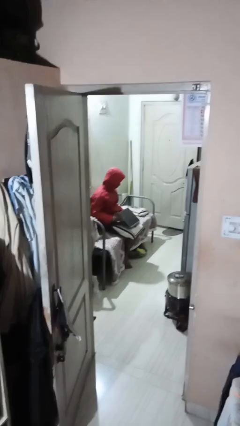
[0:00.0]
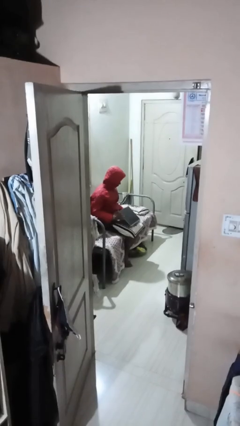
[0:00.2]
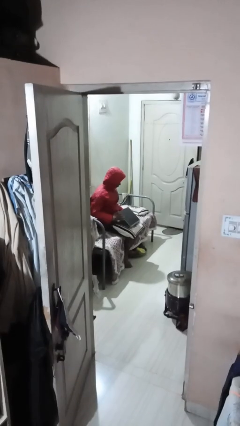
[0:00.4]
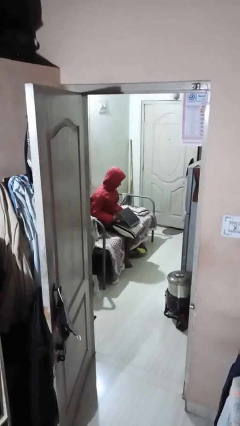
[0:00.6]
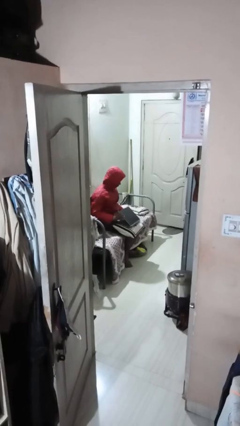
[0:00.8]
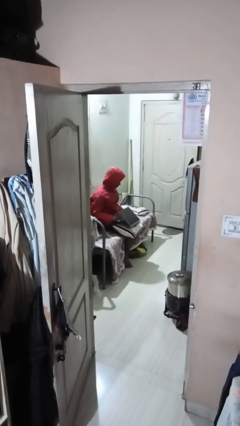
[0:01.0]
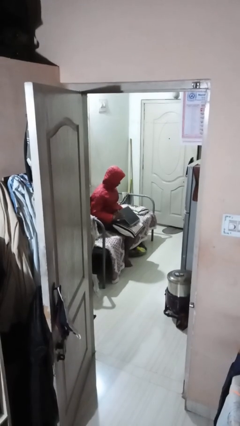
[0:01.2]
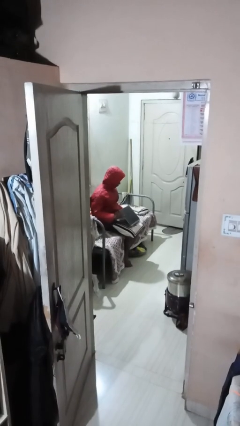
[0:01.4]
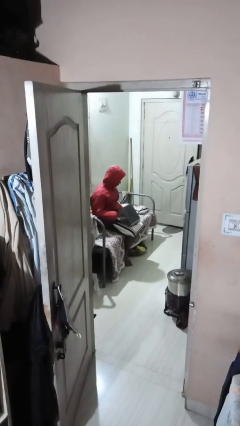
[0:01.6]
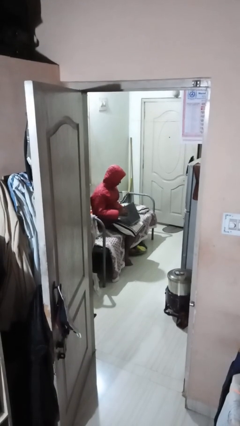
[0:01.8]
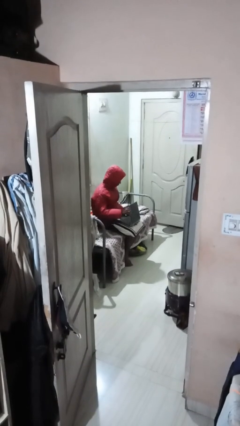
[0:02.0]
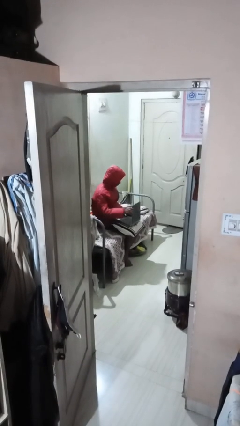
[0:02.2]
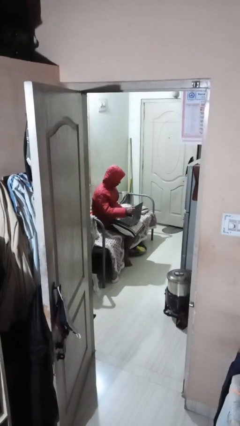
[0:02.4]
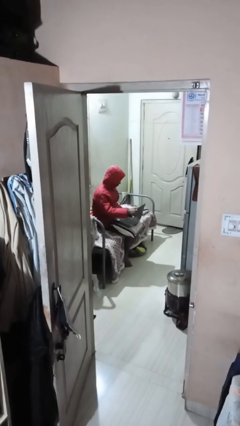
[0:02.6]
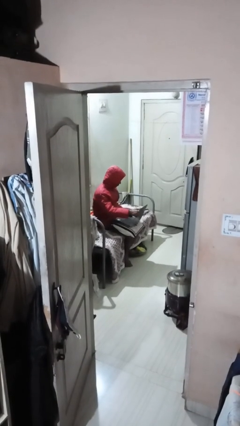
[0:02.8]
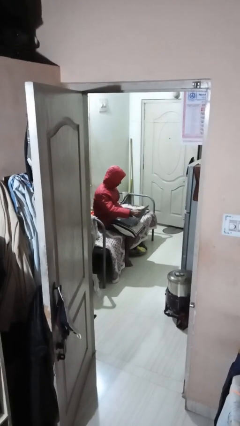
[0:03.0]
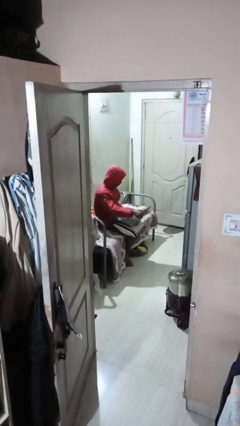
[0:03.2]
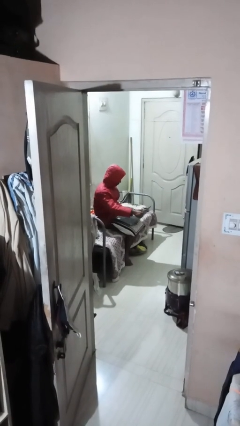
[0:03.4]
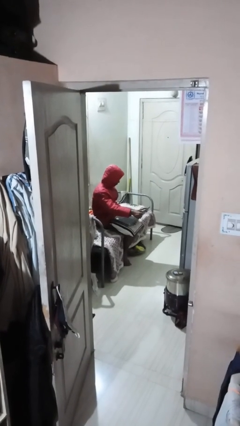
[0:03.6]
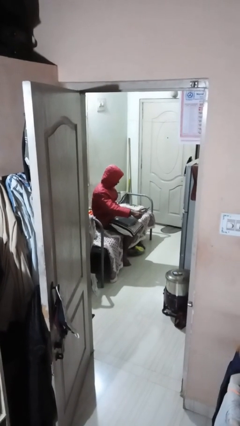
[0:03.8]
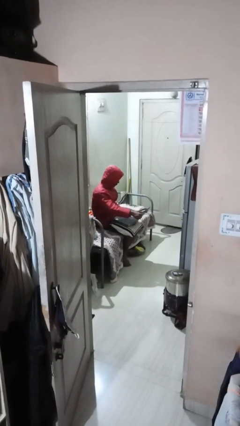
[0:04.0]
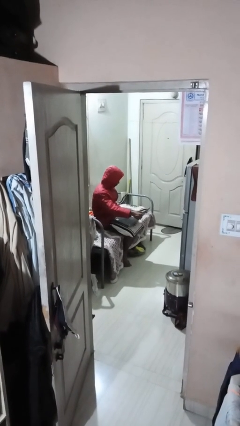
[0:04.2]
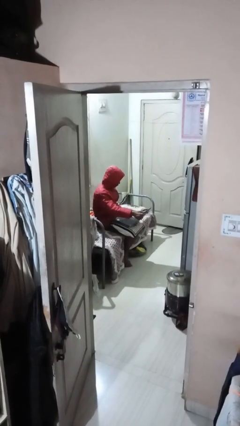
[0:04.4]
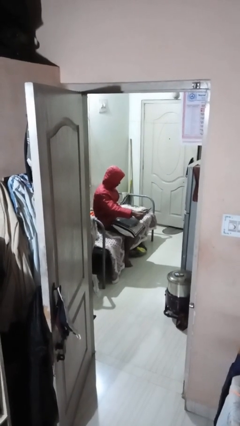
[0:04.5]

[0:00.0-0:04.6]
person interacts with laptop

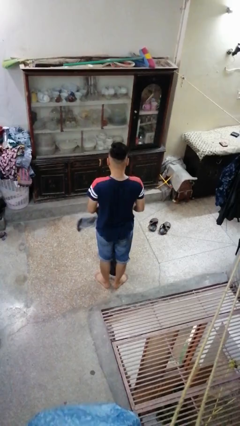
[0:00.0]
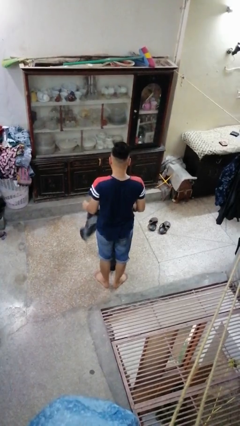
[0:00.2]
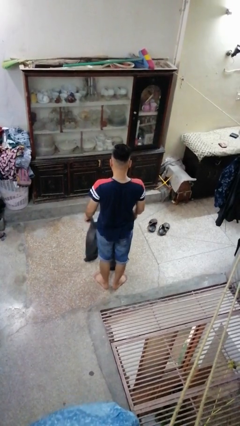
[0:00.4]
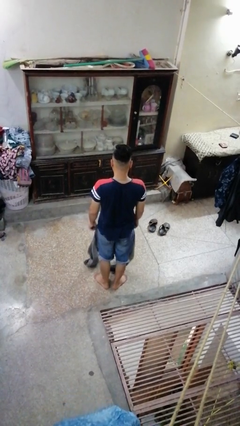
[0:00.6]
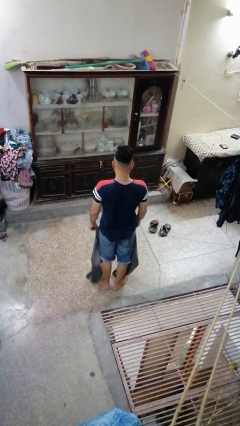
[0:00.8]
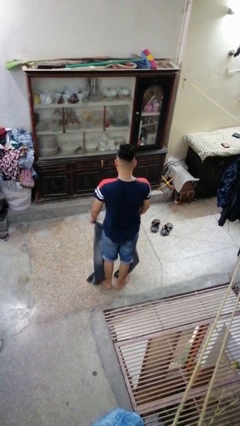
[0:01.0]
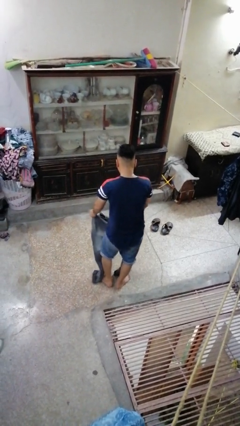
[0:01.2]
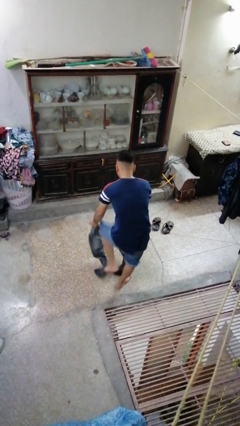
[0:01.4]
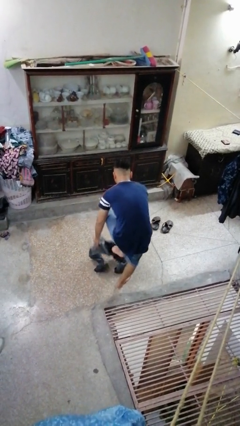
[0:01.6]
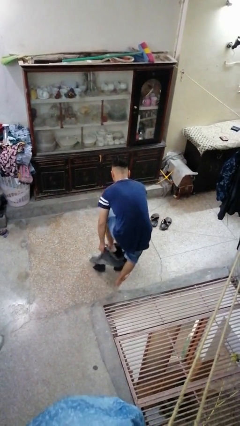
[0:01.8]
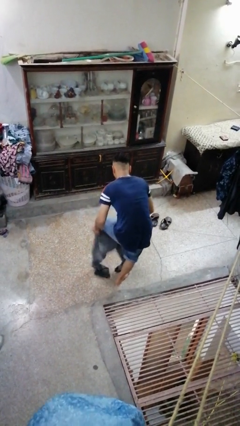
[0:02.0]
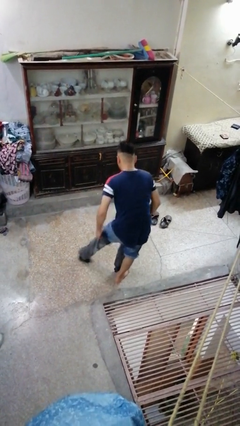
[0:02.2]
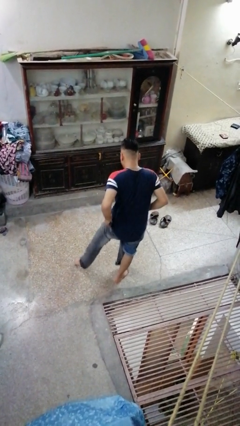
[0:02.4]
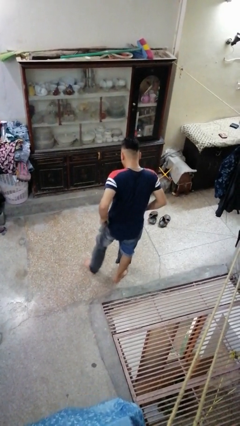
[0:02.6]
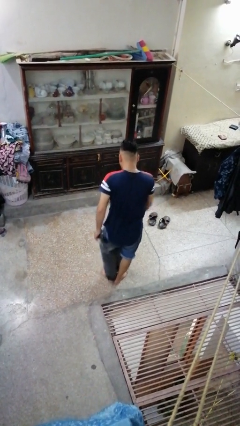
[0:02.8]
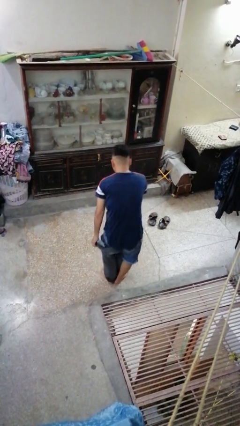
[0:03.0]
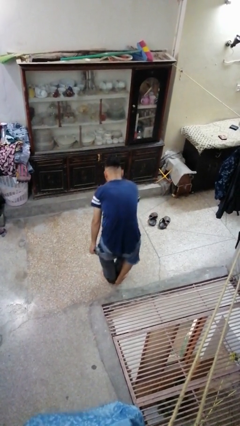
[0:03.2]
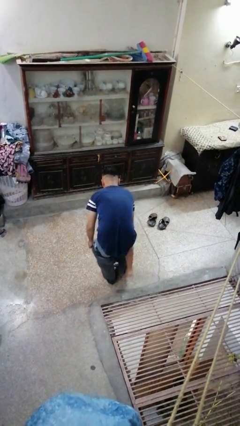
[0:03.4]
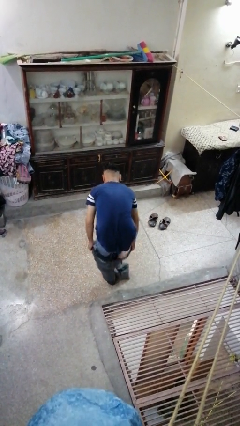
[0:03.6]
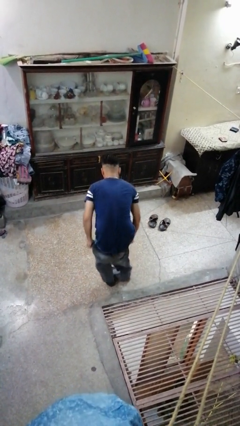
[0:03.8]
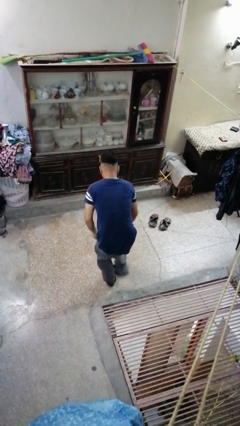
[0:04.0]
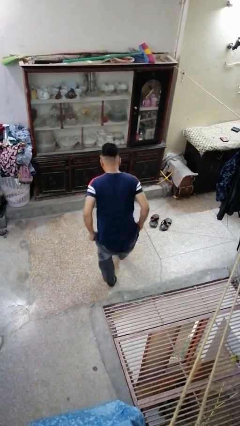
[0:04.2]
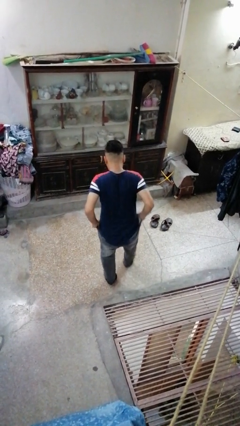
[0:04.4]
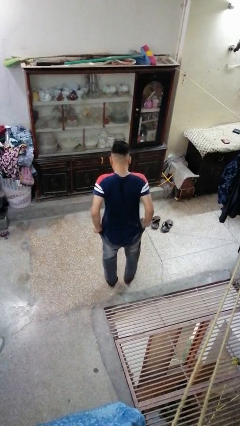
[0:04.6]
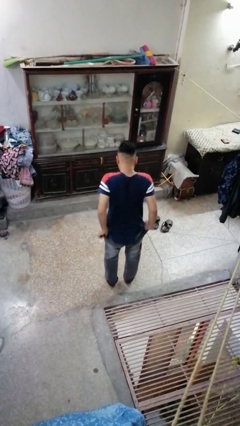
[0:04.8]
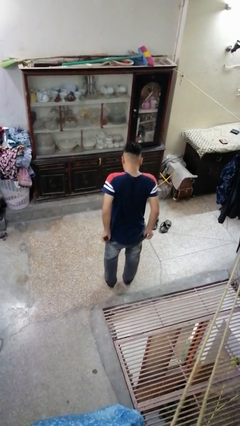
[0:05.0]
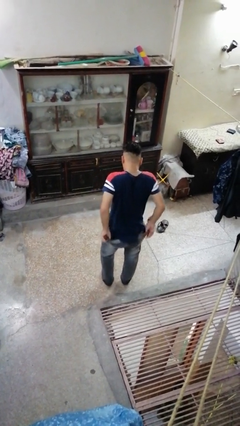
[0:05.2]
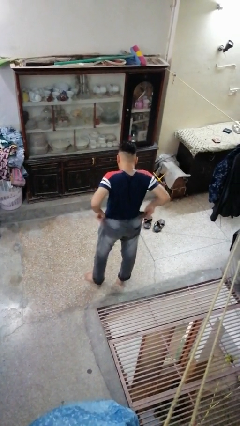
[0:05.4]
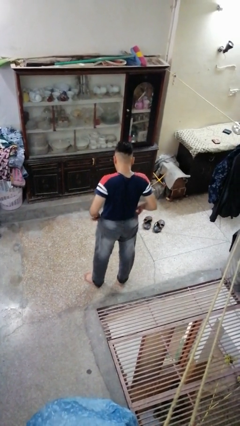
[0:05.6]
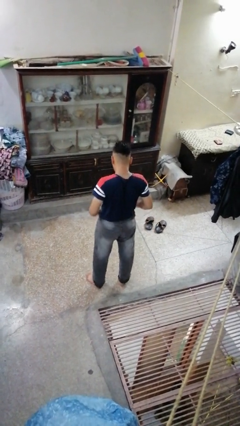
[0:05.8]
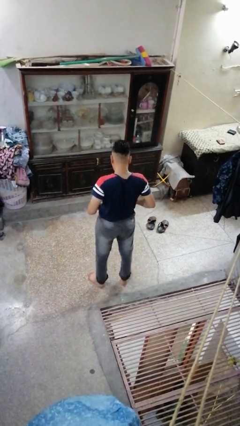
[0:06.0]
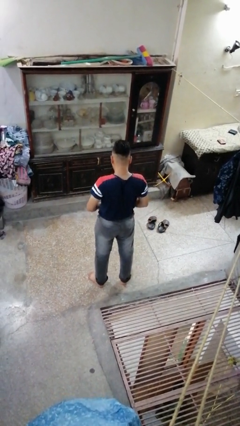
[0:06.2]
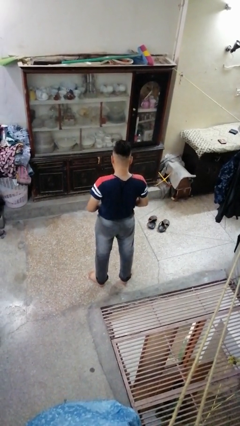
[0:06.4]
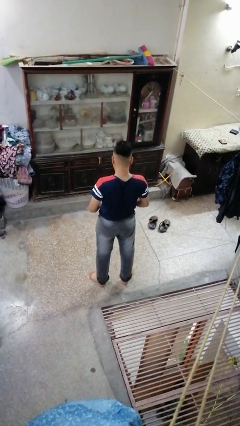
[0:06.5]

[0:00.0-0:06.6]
person puts on pants

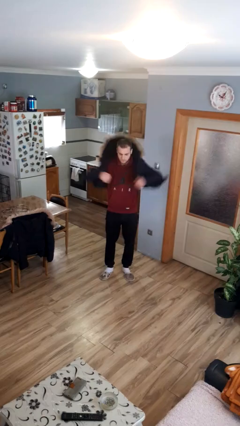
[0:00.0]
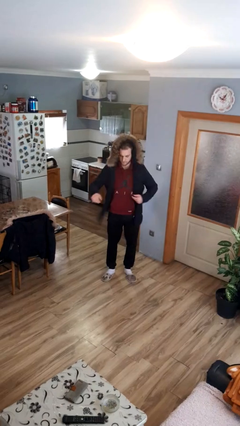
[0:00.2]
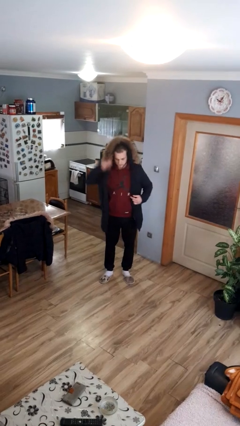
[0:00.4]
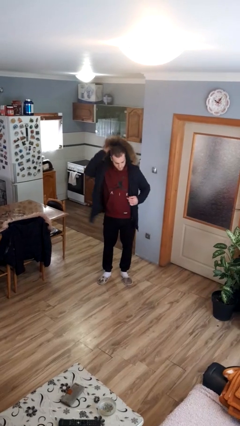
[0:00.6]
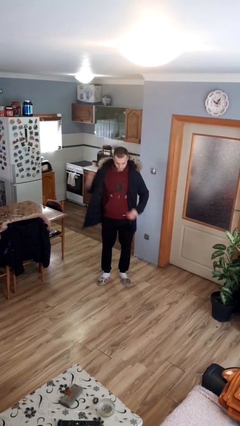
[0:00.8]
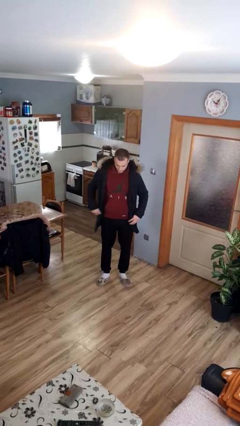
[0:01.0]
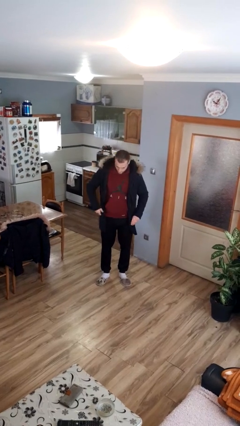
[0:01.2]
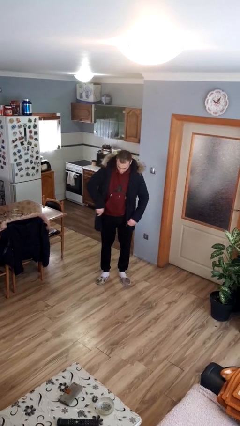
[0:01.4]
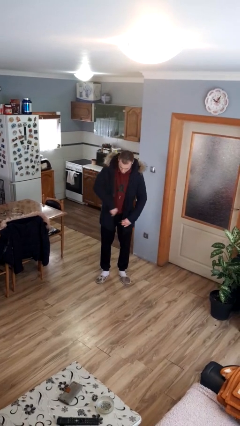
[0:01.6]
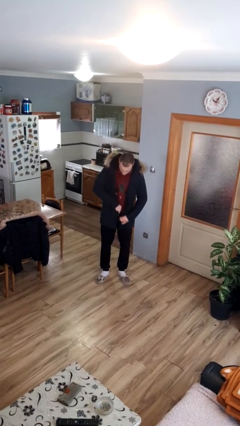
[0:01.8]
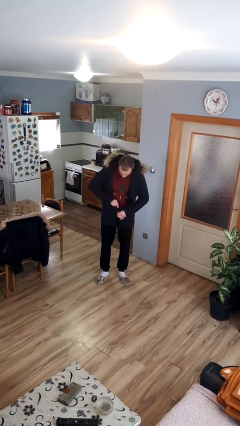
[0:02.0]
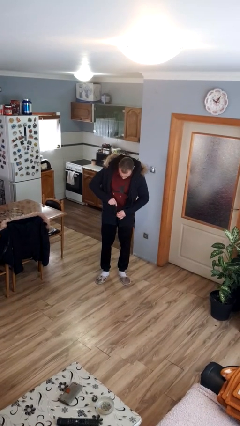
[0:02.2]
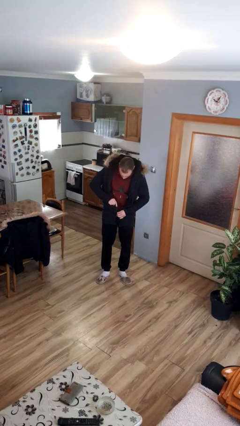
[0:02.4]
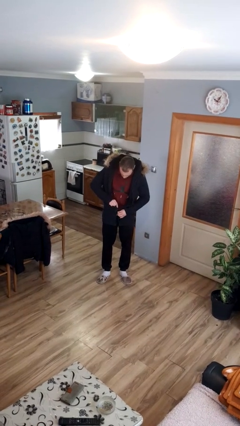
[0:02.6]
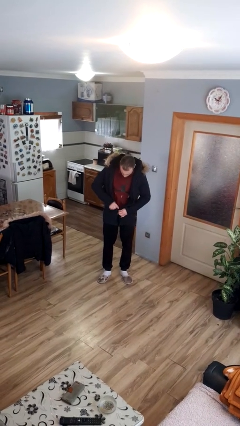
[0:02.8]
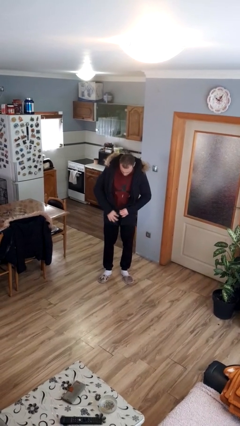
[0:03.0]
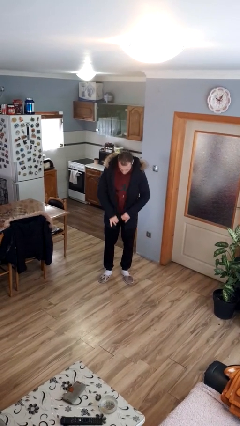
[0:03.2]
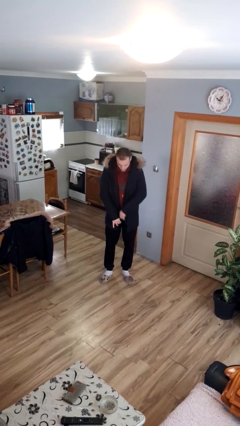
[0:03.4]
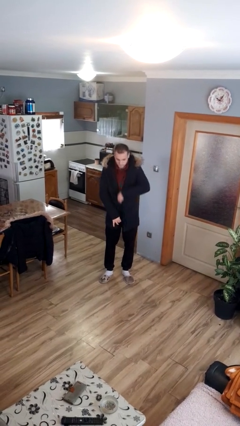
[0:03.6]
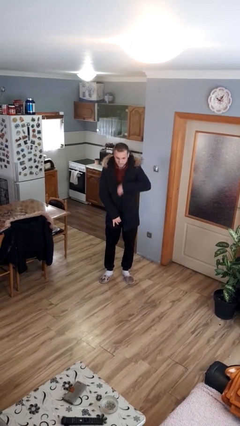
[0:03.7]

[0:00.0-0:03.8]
person puts on jacket

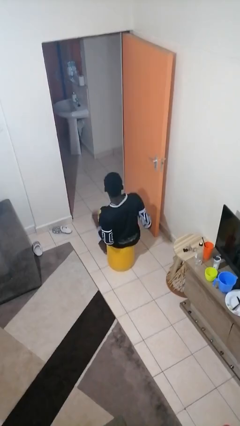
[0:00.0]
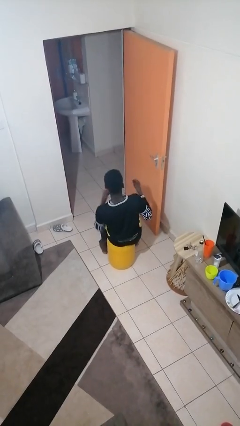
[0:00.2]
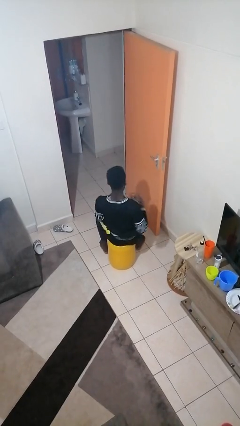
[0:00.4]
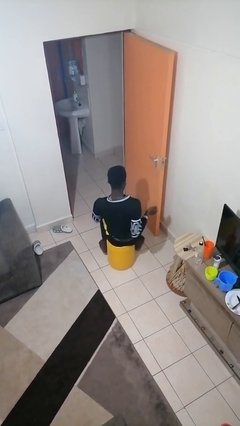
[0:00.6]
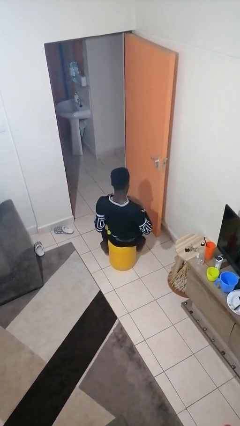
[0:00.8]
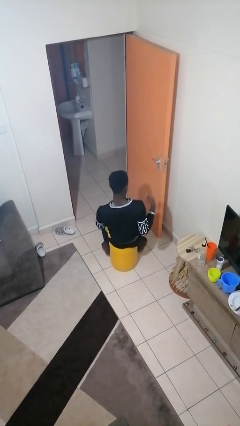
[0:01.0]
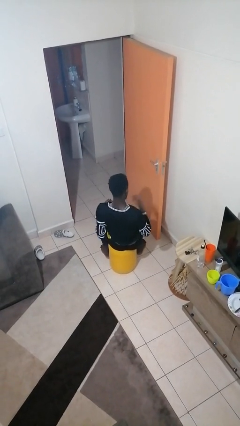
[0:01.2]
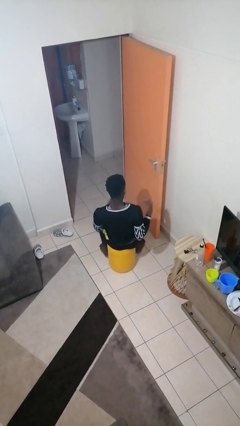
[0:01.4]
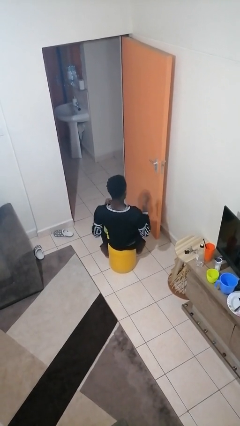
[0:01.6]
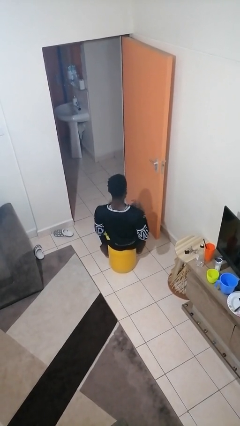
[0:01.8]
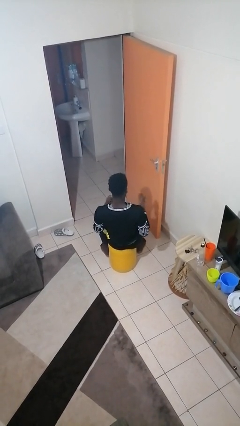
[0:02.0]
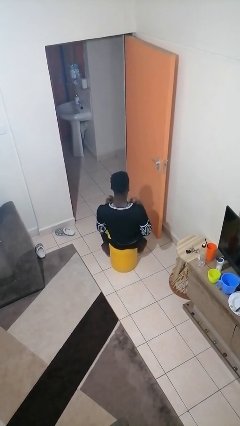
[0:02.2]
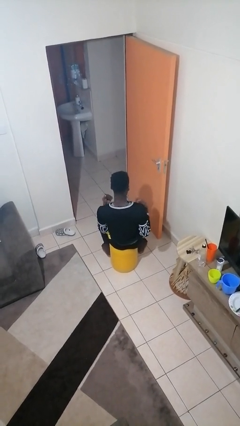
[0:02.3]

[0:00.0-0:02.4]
person drums on chest

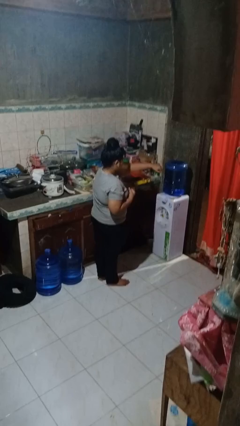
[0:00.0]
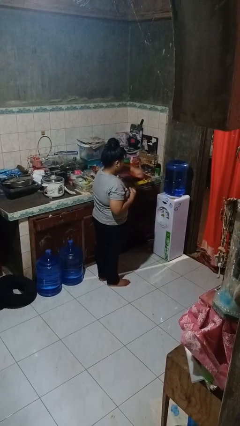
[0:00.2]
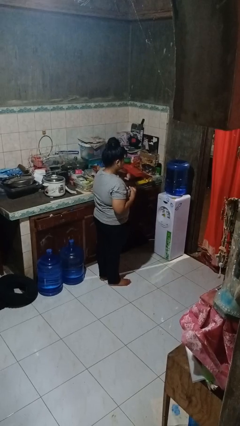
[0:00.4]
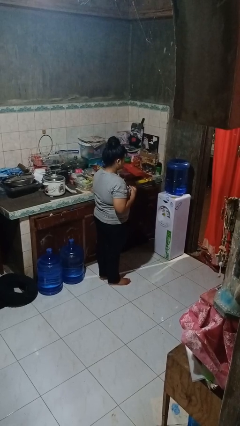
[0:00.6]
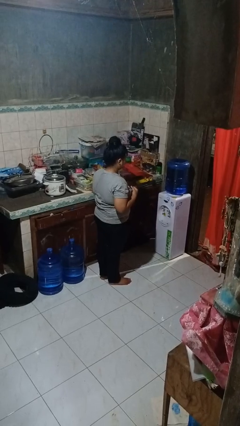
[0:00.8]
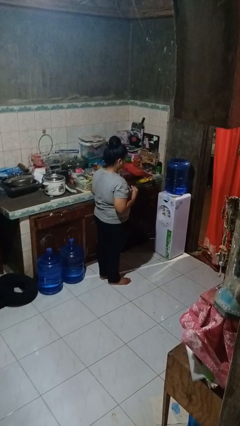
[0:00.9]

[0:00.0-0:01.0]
person punches
